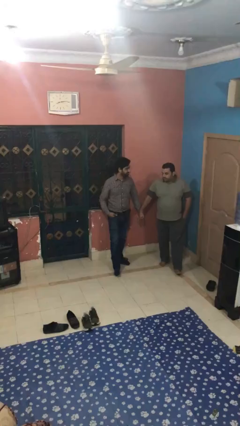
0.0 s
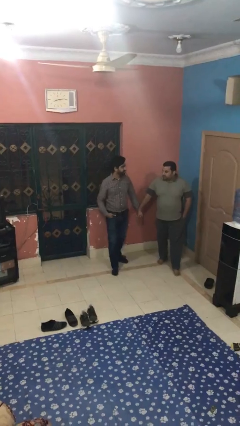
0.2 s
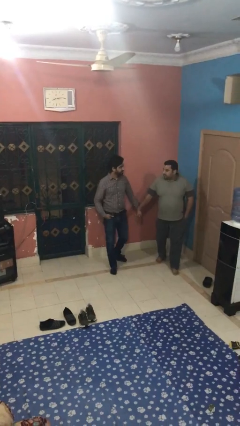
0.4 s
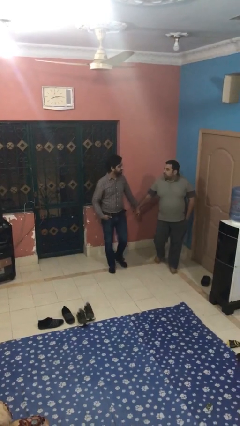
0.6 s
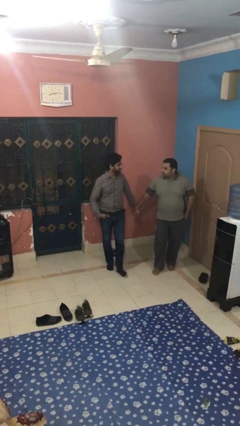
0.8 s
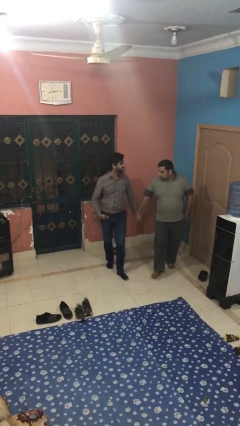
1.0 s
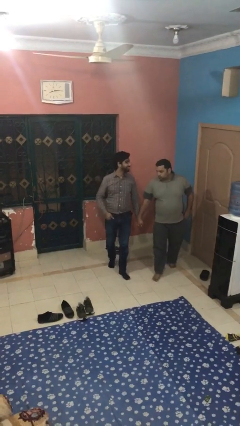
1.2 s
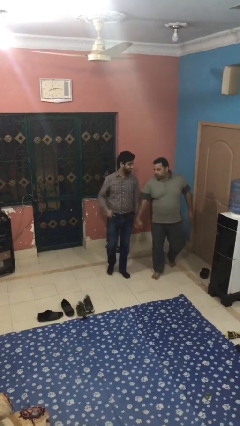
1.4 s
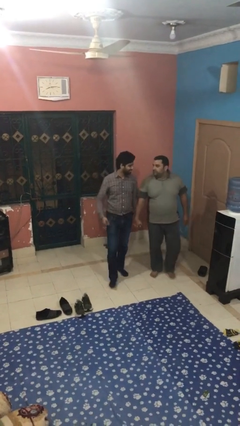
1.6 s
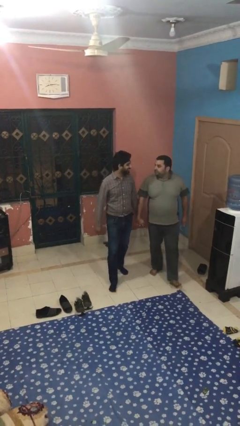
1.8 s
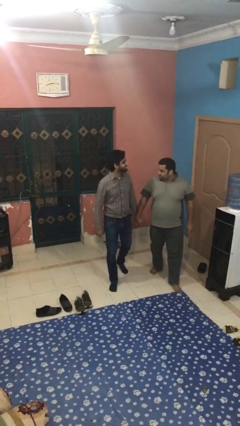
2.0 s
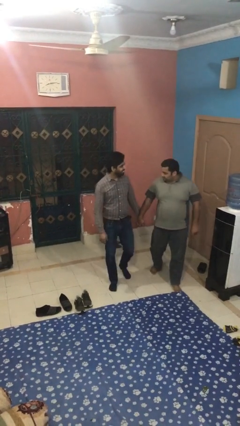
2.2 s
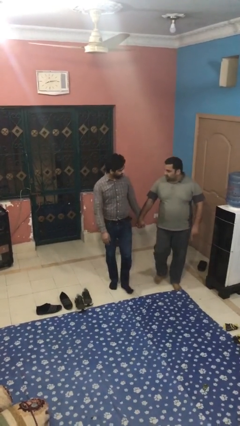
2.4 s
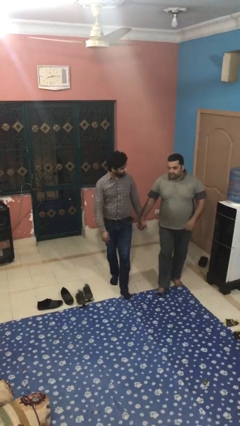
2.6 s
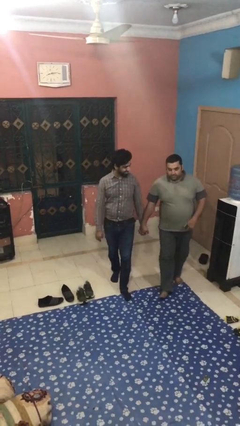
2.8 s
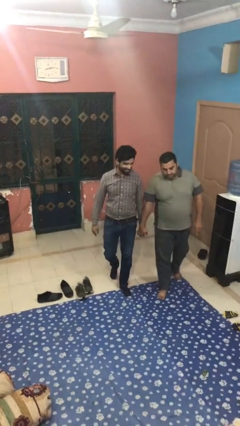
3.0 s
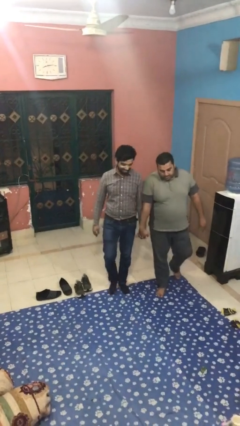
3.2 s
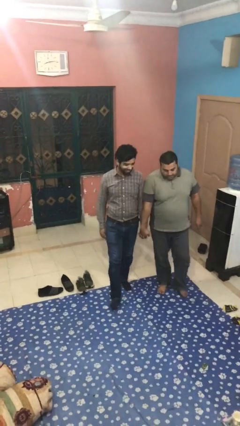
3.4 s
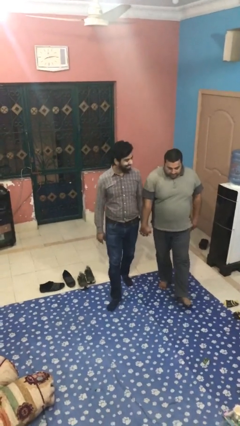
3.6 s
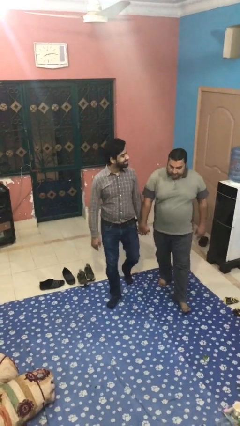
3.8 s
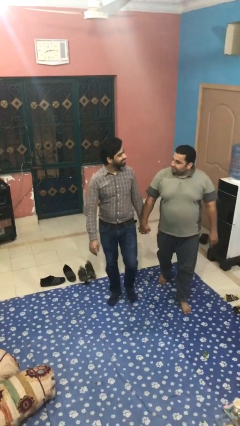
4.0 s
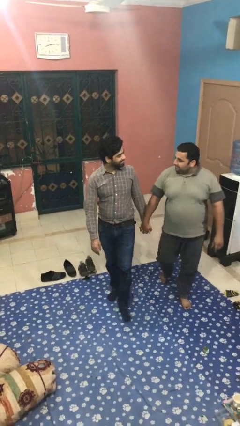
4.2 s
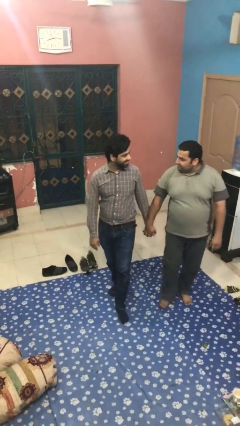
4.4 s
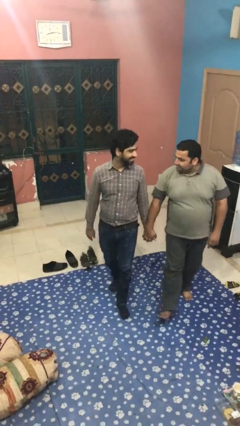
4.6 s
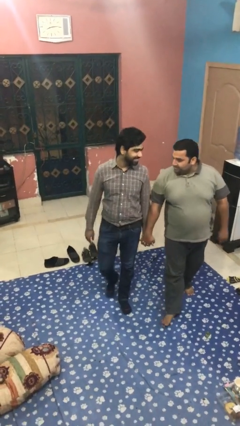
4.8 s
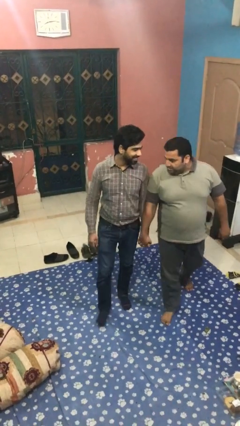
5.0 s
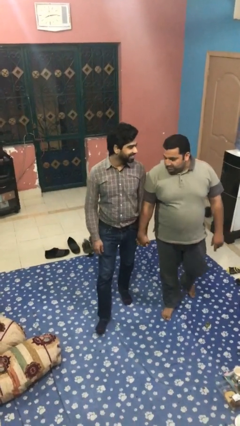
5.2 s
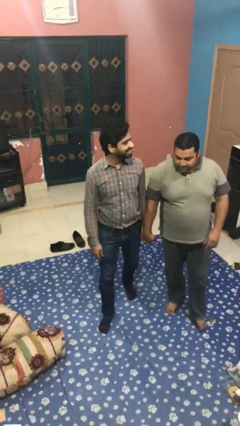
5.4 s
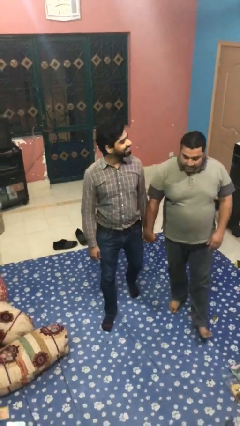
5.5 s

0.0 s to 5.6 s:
person holds hand

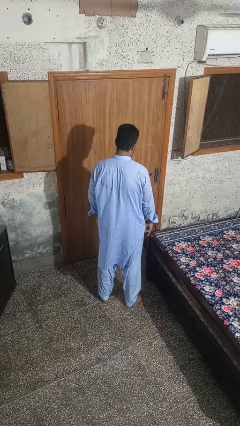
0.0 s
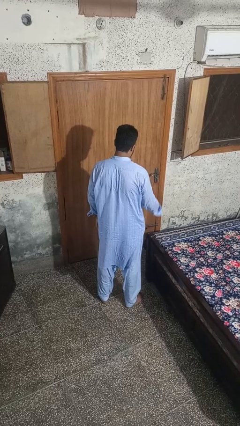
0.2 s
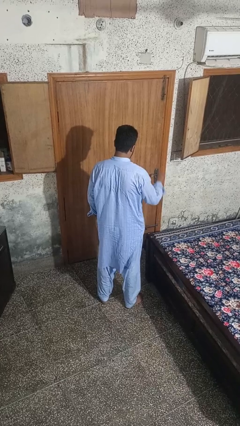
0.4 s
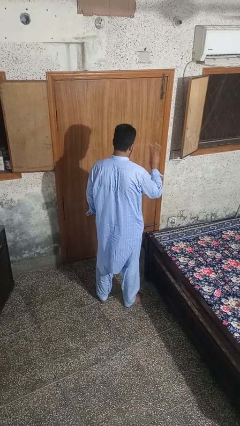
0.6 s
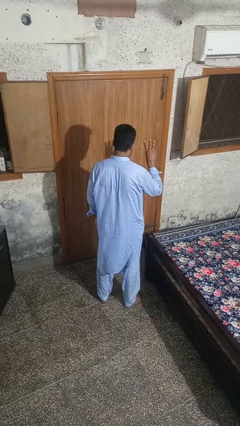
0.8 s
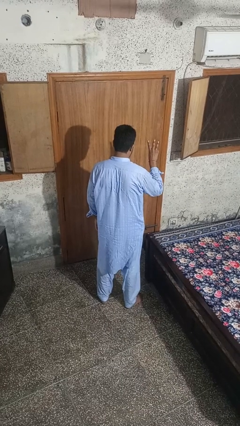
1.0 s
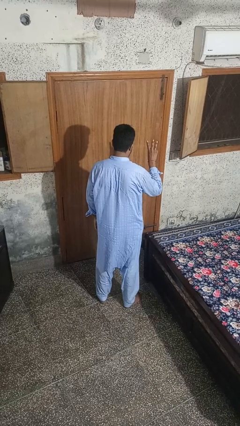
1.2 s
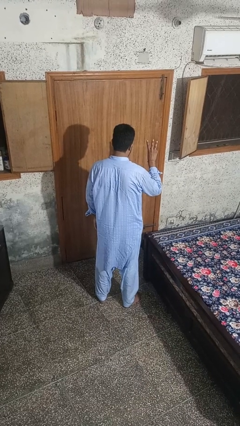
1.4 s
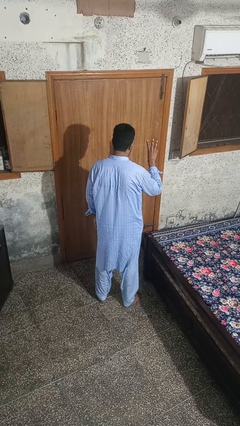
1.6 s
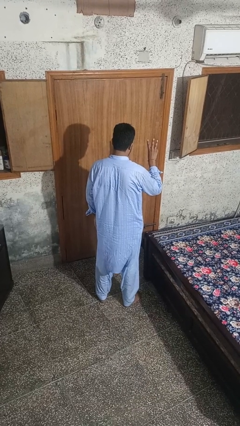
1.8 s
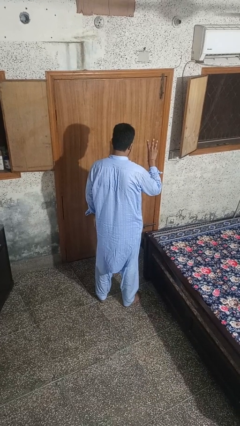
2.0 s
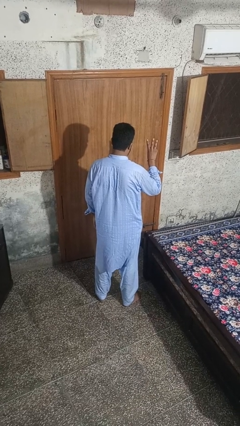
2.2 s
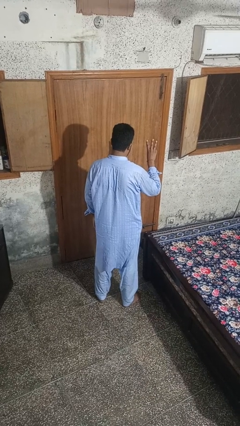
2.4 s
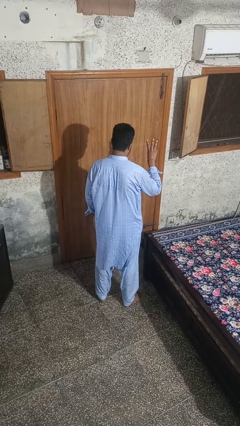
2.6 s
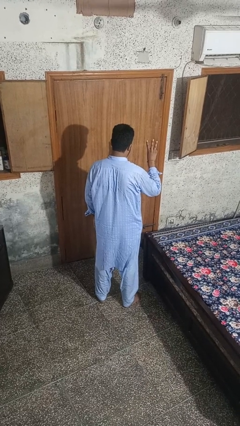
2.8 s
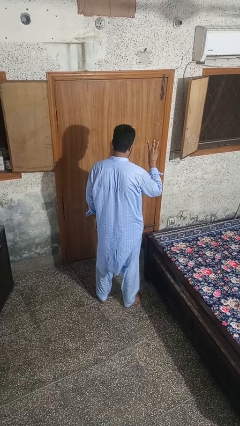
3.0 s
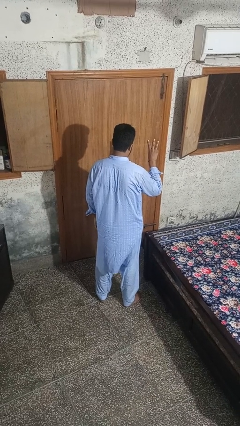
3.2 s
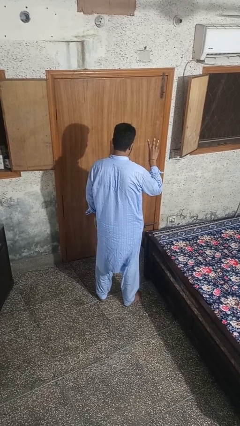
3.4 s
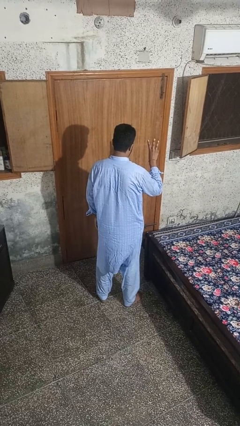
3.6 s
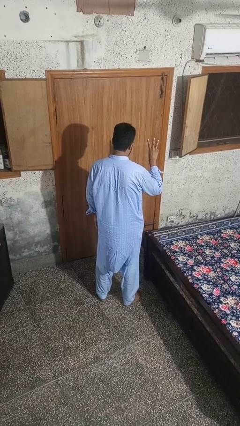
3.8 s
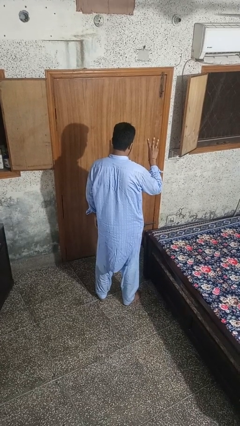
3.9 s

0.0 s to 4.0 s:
person gestures number three

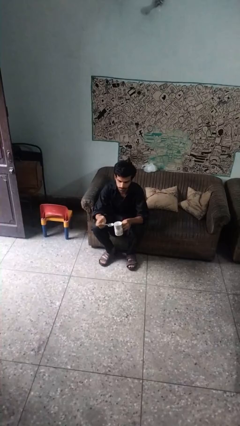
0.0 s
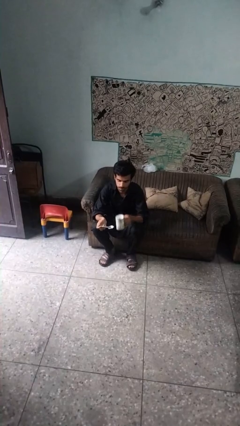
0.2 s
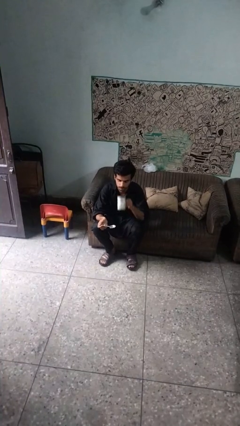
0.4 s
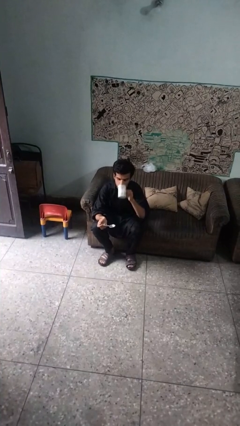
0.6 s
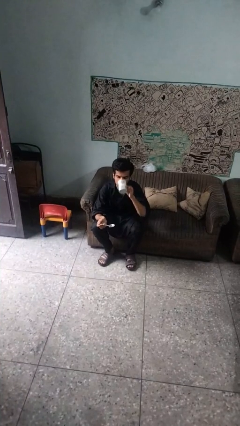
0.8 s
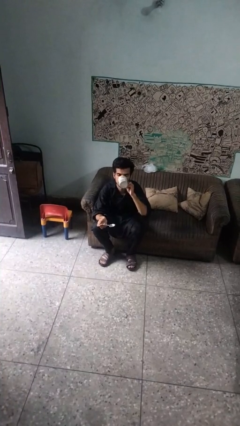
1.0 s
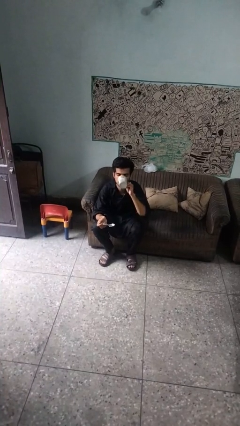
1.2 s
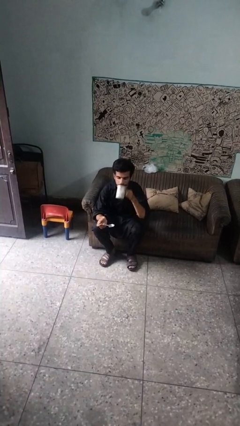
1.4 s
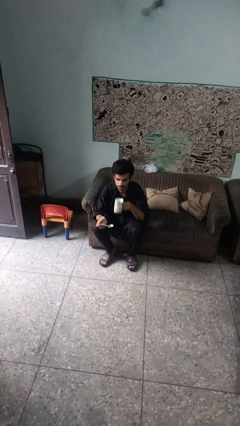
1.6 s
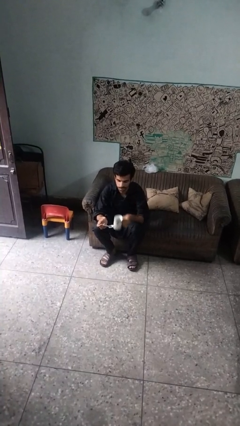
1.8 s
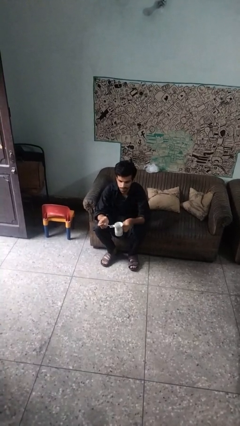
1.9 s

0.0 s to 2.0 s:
person drinks from mug

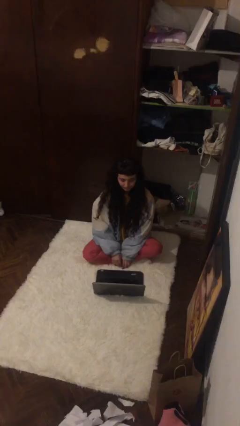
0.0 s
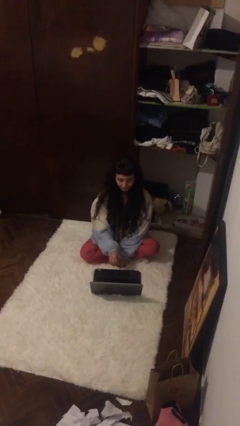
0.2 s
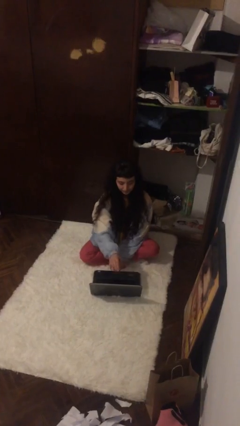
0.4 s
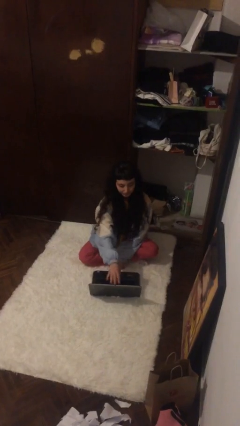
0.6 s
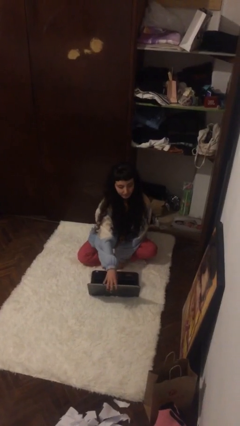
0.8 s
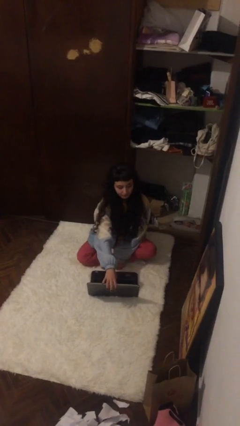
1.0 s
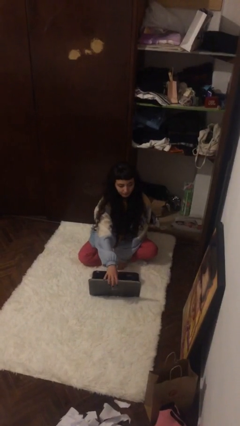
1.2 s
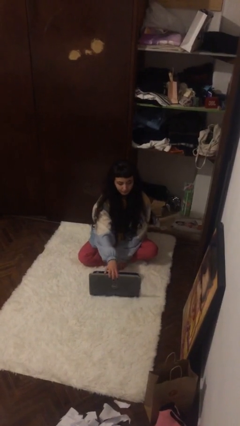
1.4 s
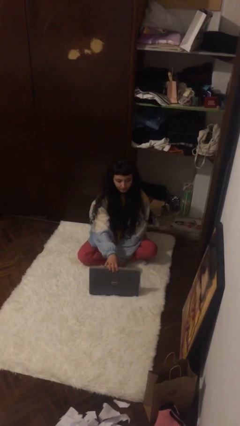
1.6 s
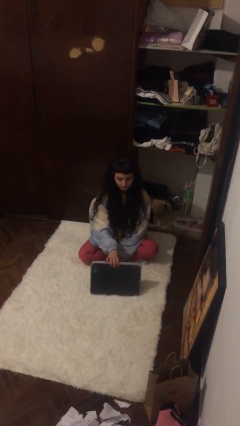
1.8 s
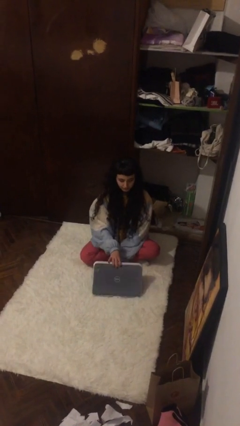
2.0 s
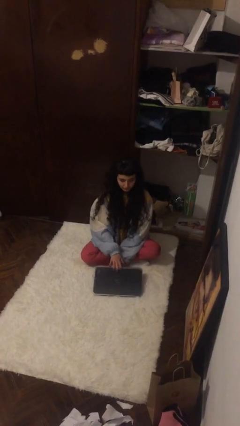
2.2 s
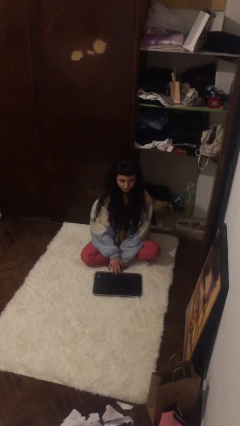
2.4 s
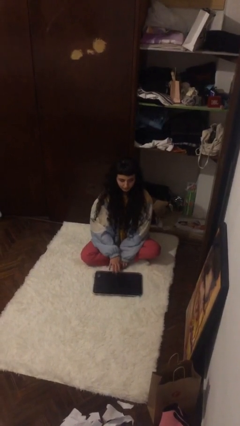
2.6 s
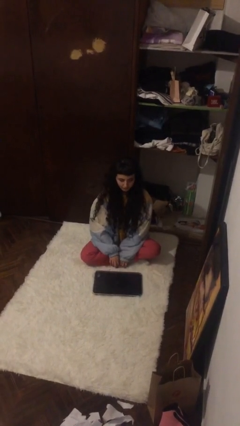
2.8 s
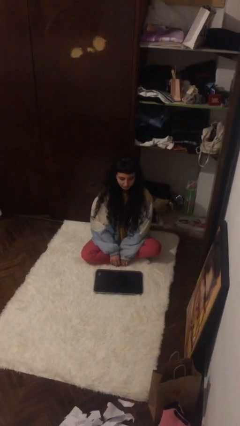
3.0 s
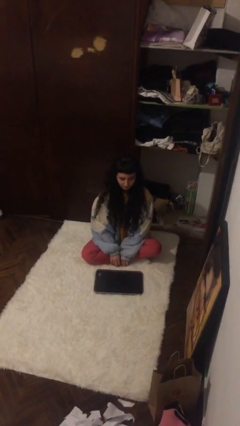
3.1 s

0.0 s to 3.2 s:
person closes laptop

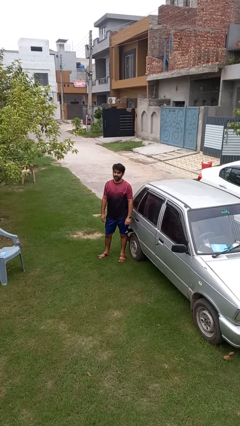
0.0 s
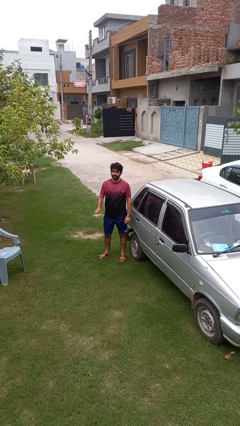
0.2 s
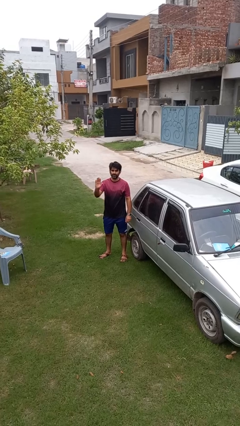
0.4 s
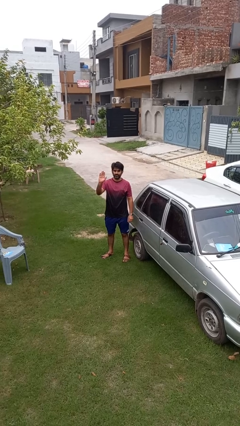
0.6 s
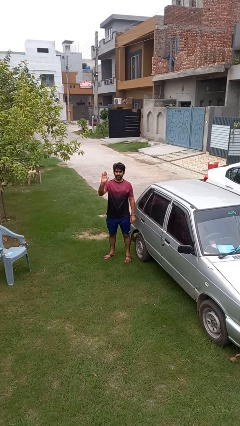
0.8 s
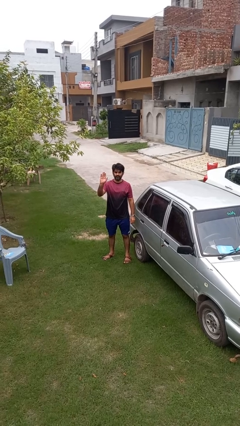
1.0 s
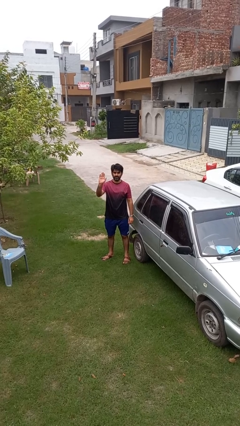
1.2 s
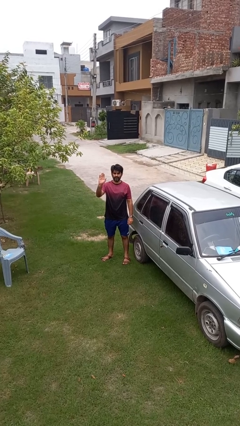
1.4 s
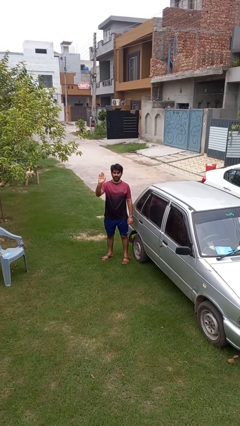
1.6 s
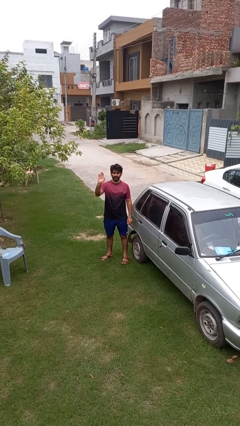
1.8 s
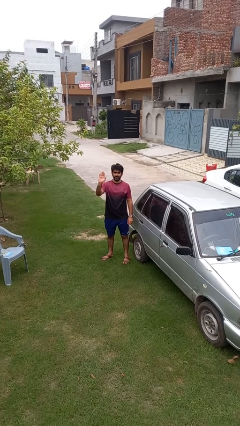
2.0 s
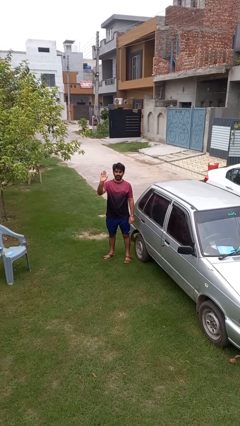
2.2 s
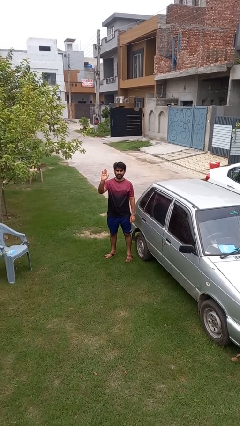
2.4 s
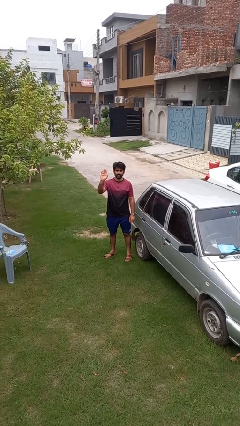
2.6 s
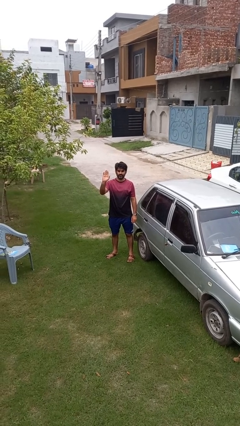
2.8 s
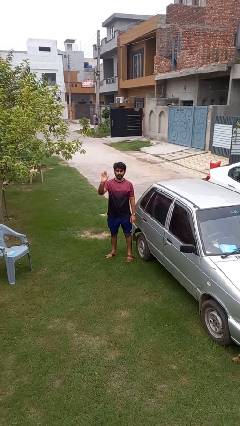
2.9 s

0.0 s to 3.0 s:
person gestures raise hand
